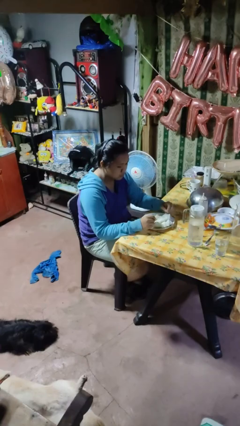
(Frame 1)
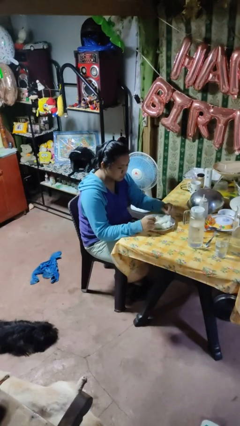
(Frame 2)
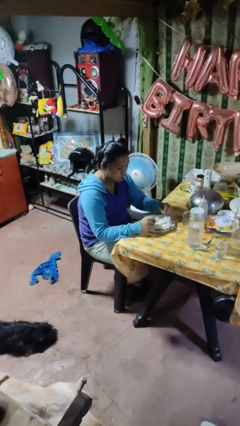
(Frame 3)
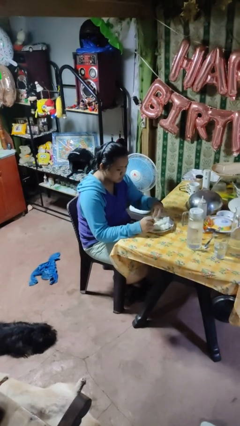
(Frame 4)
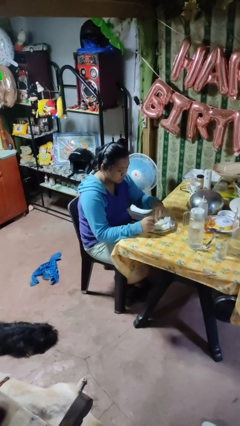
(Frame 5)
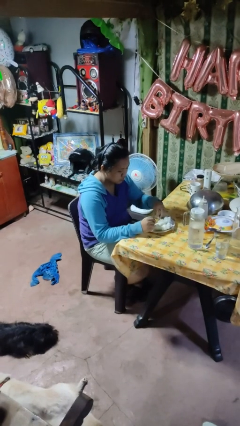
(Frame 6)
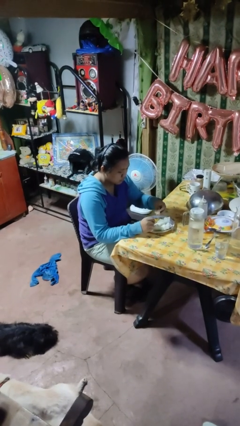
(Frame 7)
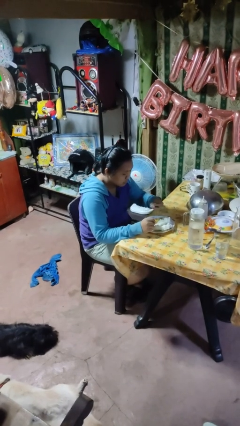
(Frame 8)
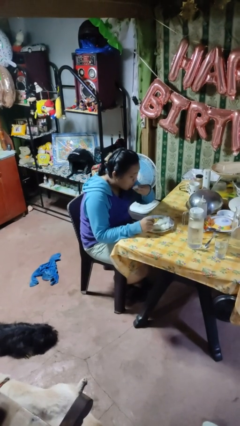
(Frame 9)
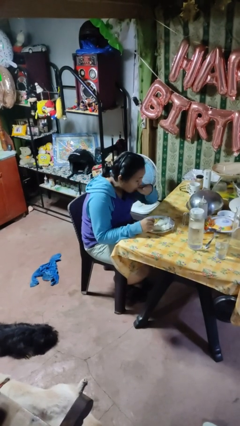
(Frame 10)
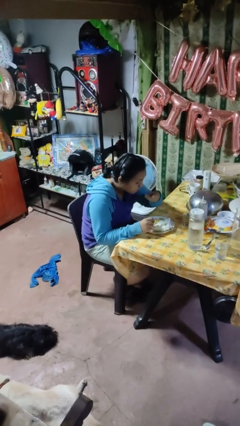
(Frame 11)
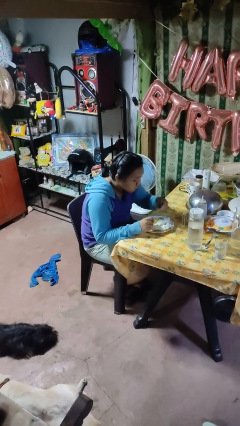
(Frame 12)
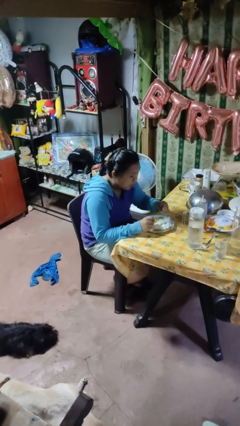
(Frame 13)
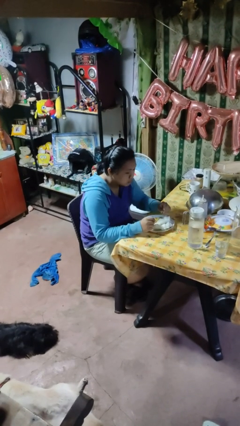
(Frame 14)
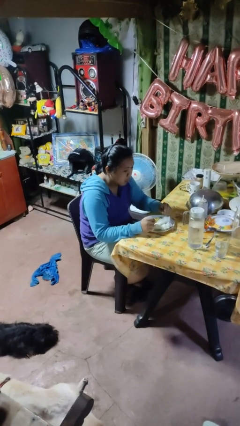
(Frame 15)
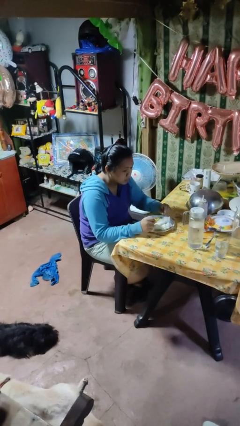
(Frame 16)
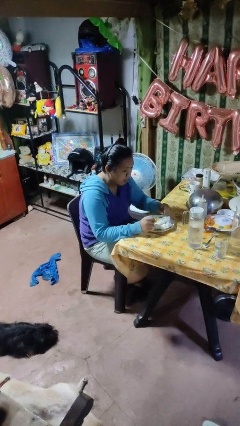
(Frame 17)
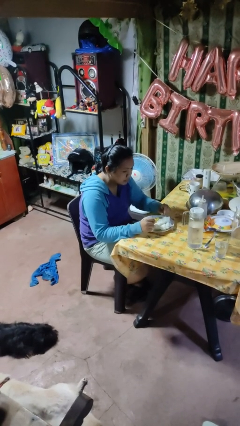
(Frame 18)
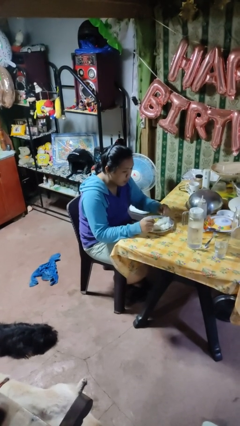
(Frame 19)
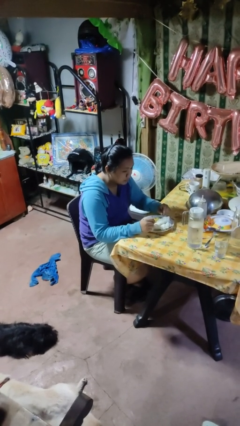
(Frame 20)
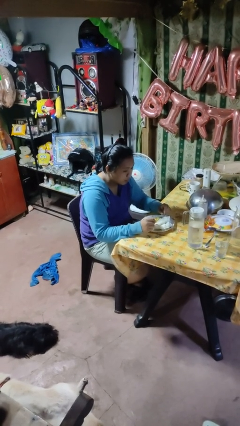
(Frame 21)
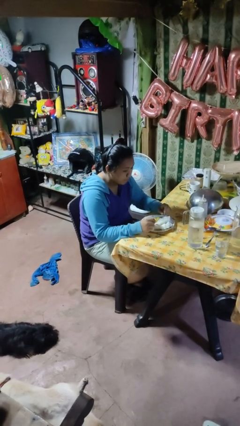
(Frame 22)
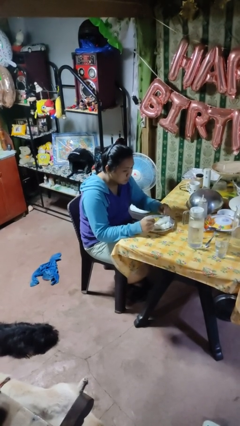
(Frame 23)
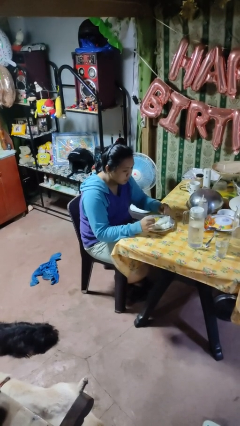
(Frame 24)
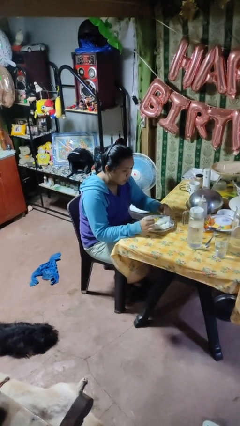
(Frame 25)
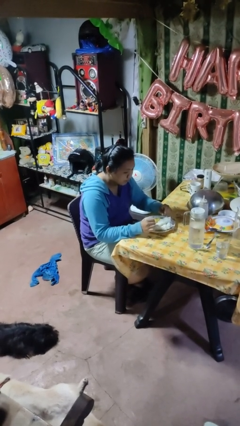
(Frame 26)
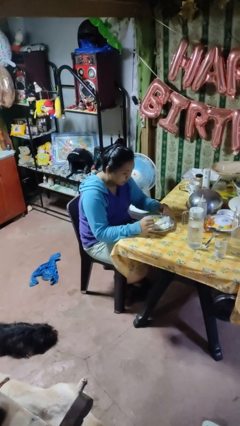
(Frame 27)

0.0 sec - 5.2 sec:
person eats with hands

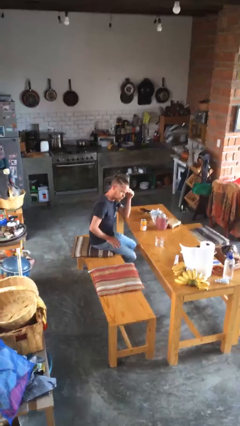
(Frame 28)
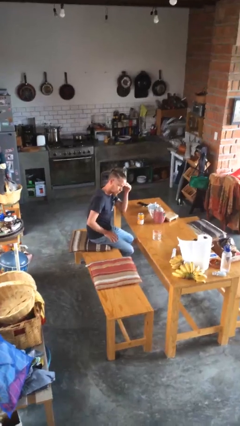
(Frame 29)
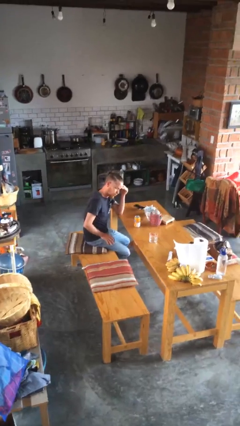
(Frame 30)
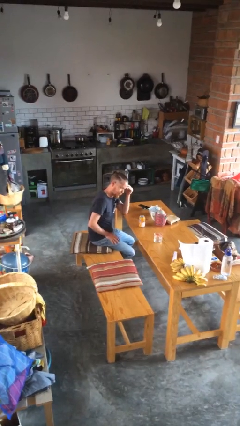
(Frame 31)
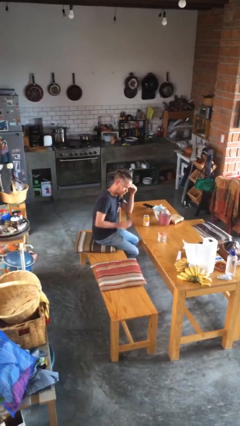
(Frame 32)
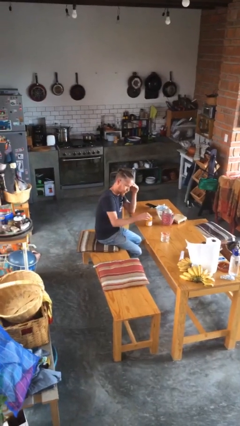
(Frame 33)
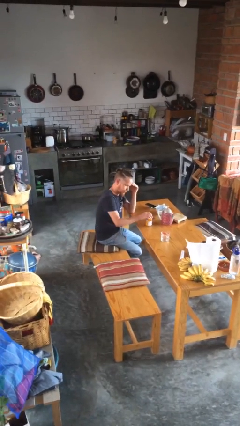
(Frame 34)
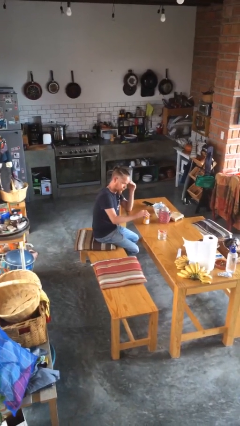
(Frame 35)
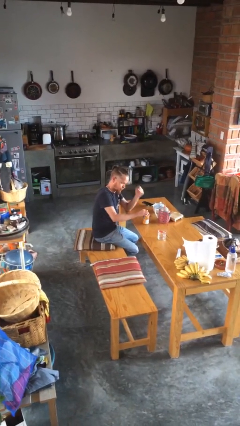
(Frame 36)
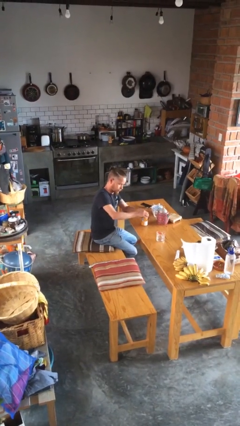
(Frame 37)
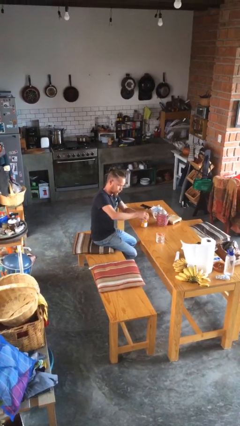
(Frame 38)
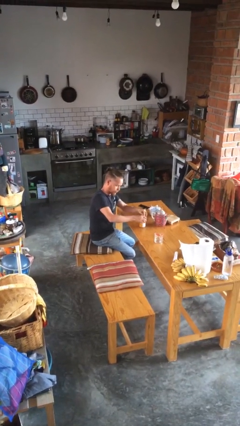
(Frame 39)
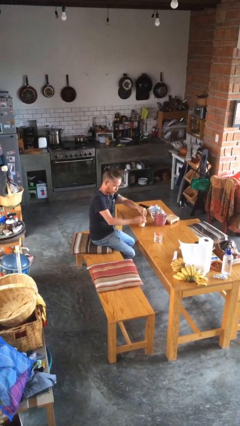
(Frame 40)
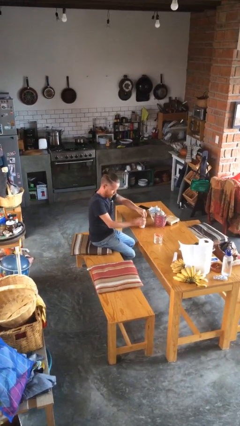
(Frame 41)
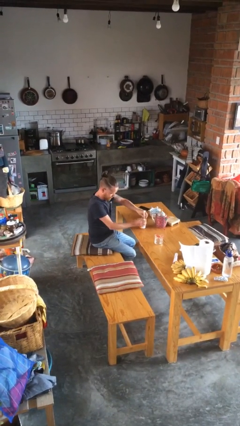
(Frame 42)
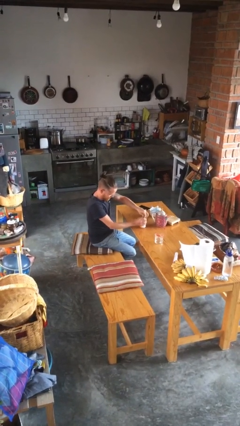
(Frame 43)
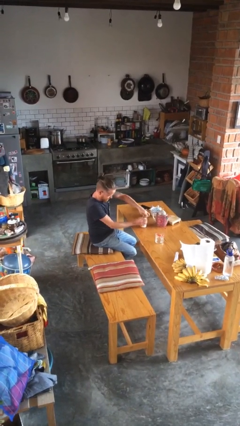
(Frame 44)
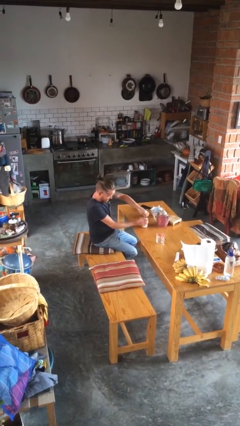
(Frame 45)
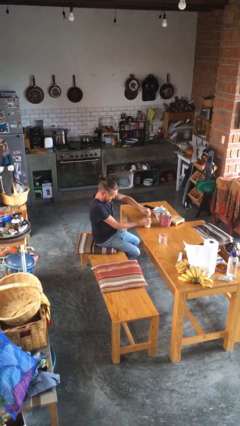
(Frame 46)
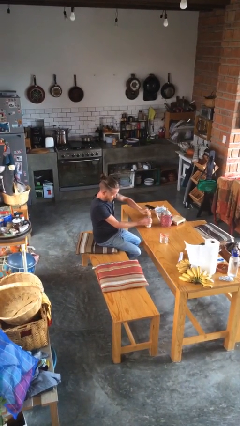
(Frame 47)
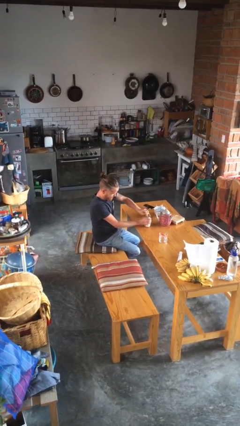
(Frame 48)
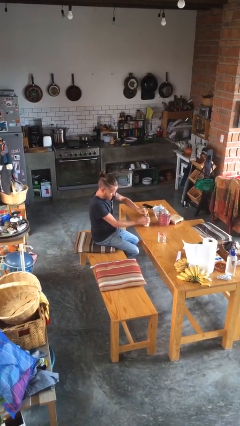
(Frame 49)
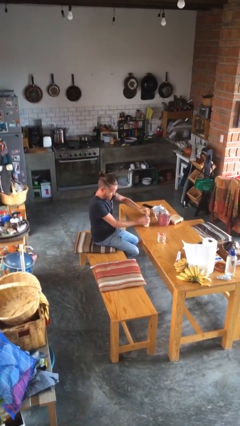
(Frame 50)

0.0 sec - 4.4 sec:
person opens beverage can

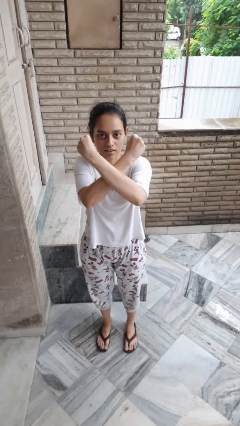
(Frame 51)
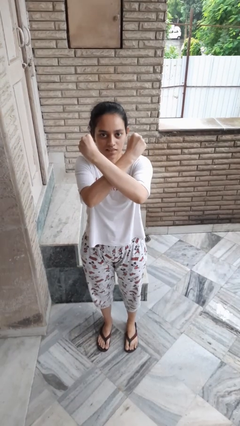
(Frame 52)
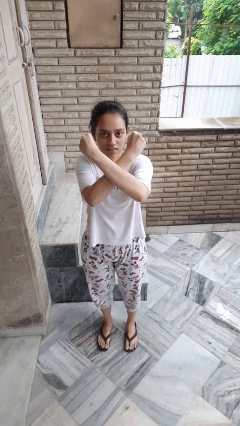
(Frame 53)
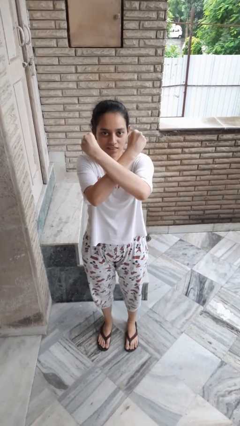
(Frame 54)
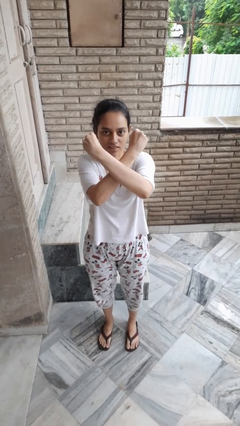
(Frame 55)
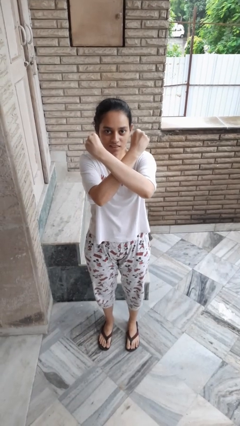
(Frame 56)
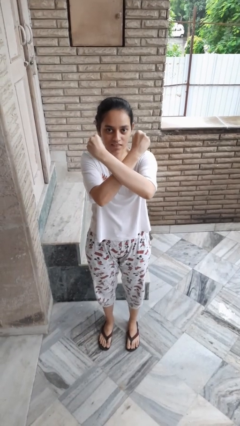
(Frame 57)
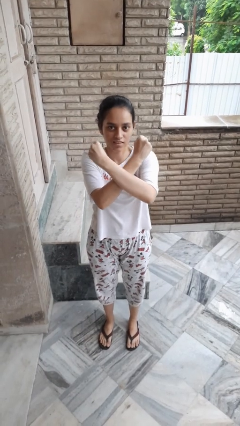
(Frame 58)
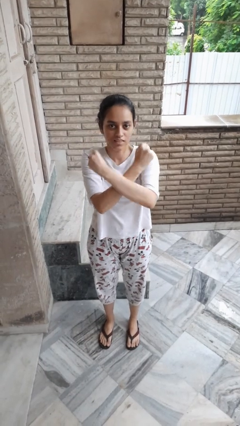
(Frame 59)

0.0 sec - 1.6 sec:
person gestures arms x

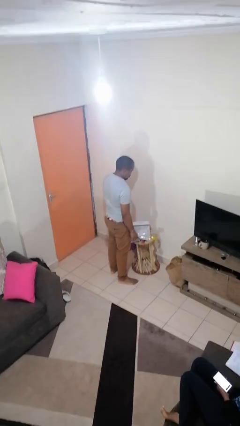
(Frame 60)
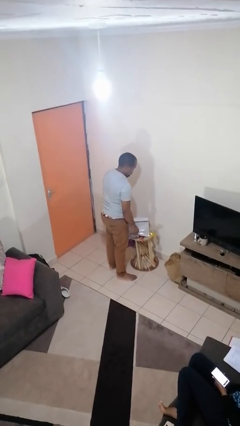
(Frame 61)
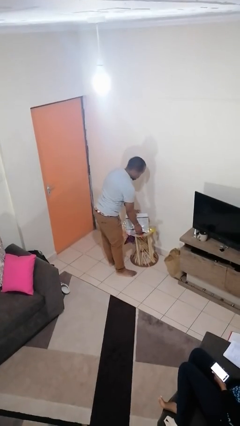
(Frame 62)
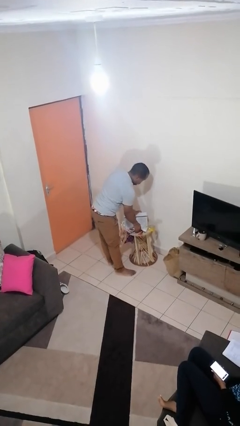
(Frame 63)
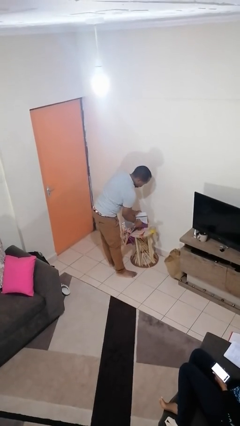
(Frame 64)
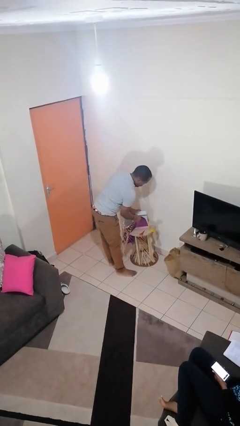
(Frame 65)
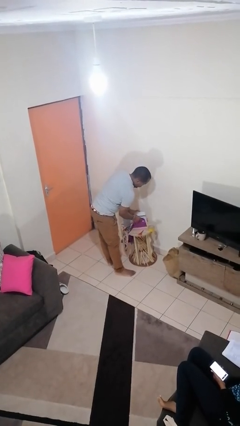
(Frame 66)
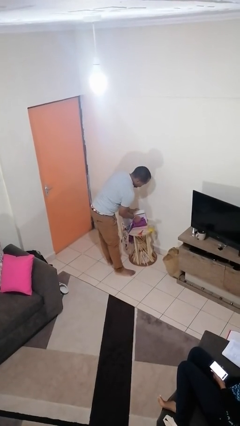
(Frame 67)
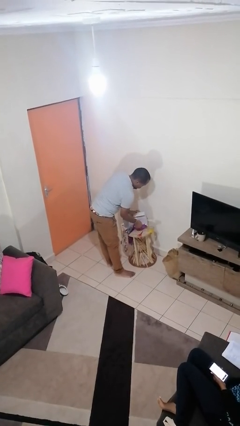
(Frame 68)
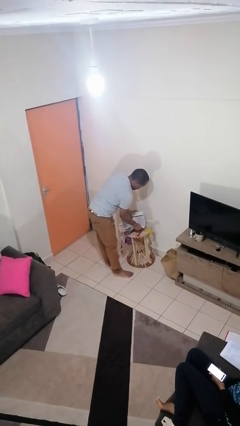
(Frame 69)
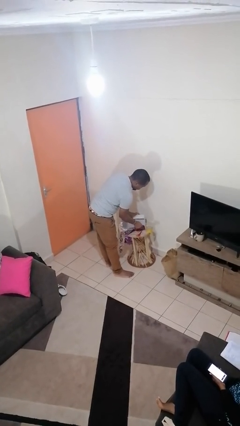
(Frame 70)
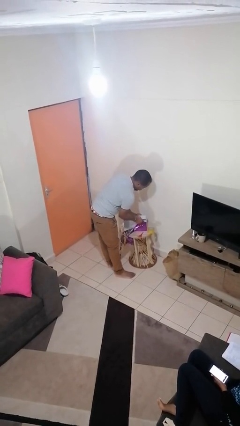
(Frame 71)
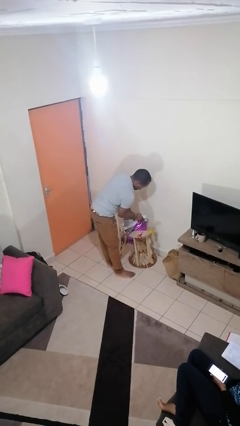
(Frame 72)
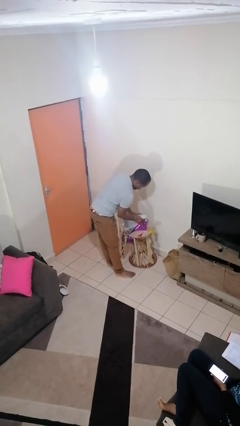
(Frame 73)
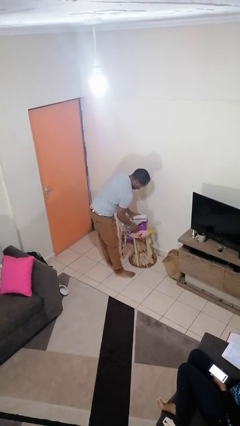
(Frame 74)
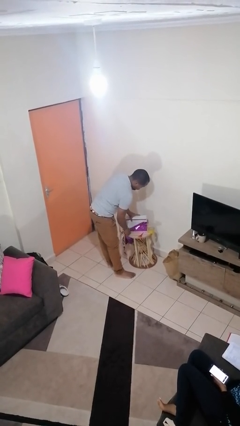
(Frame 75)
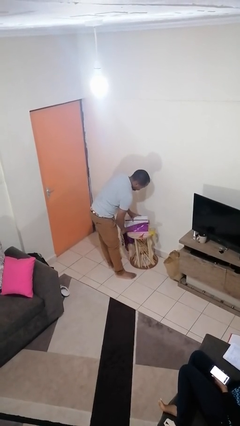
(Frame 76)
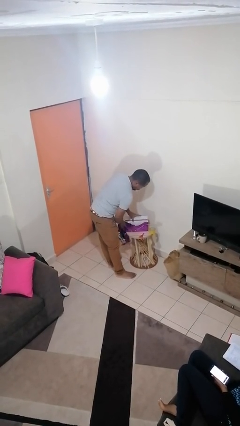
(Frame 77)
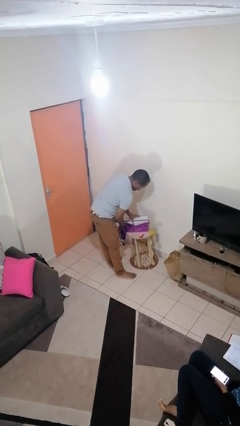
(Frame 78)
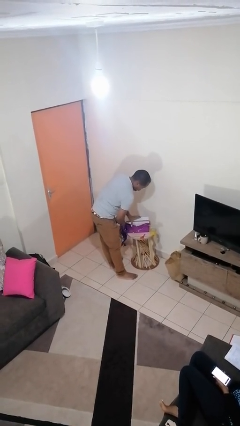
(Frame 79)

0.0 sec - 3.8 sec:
person wraps box

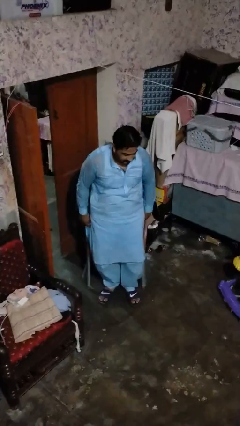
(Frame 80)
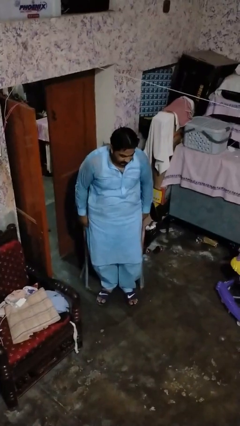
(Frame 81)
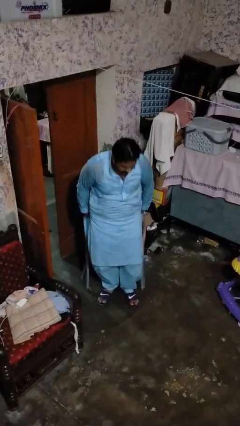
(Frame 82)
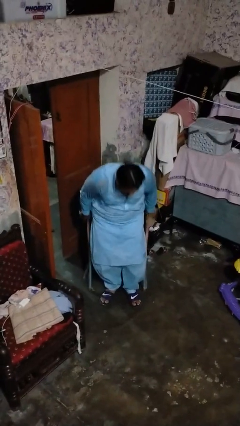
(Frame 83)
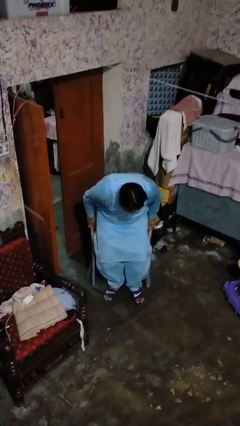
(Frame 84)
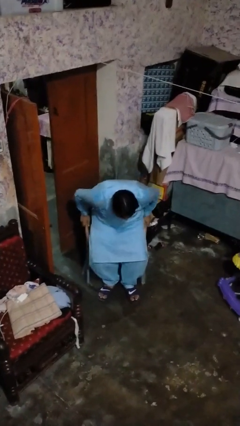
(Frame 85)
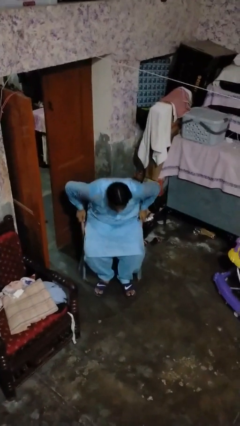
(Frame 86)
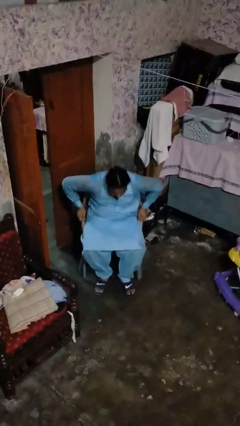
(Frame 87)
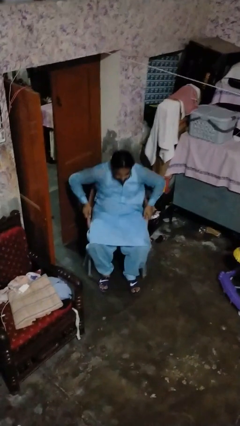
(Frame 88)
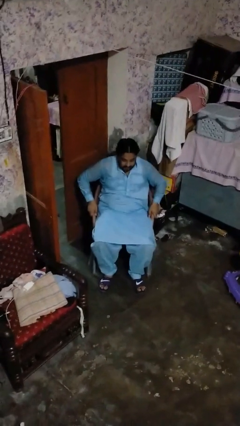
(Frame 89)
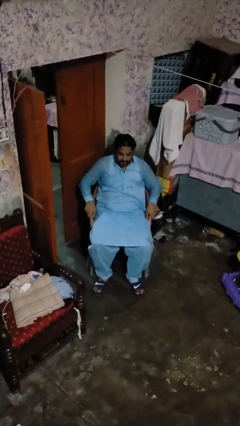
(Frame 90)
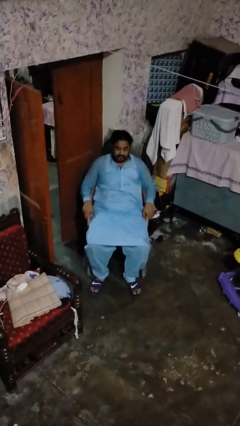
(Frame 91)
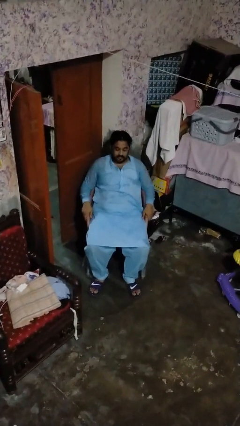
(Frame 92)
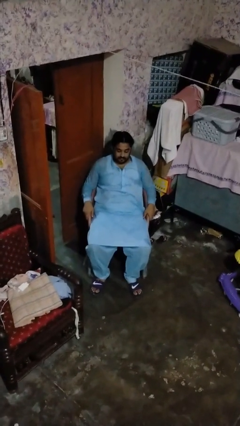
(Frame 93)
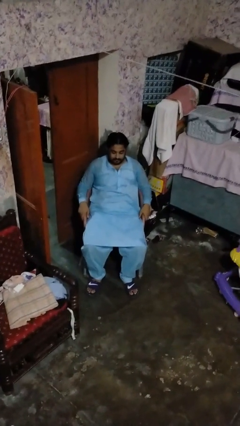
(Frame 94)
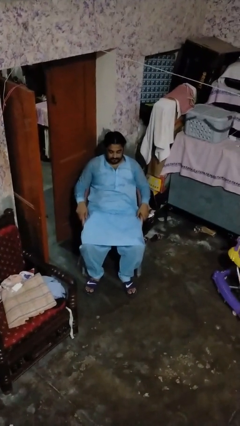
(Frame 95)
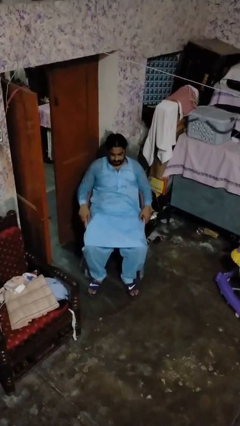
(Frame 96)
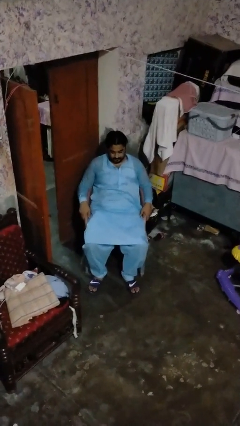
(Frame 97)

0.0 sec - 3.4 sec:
person sits down
